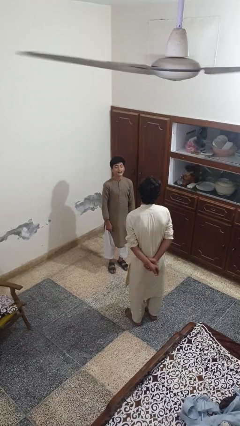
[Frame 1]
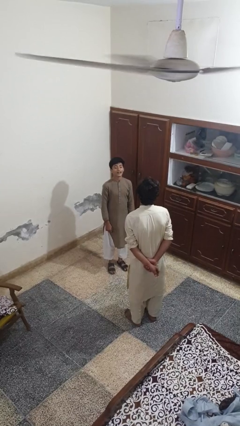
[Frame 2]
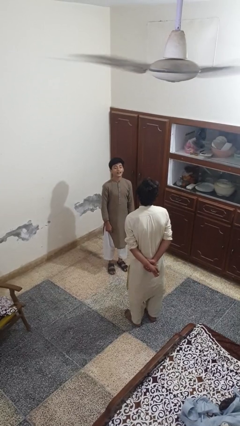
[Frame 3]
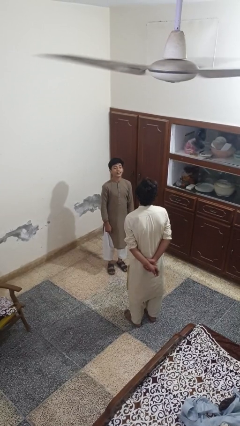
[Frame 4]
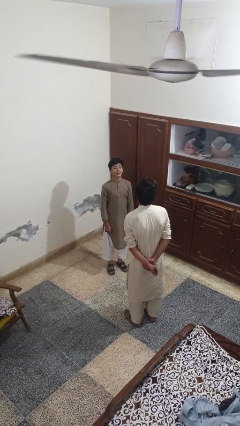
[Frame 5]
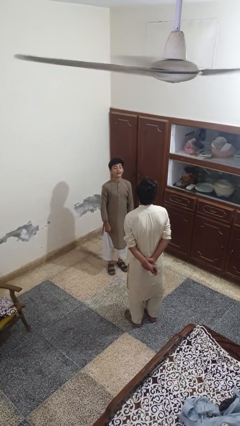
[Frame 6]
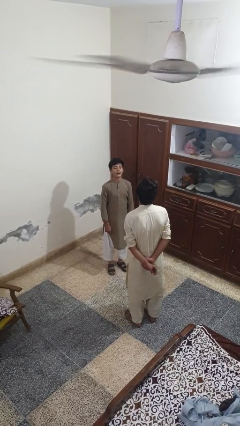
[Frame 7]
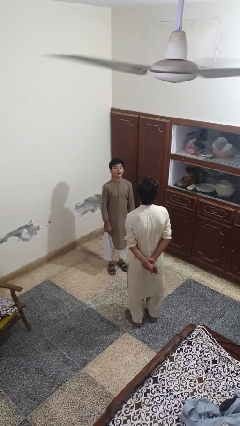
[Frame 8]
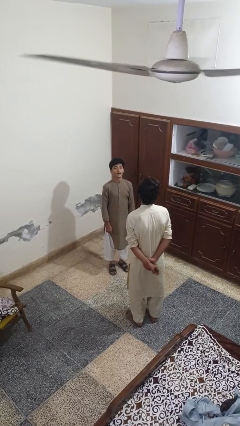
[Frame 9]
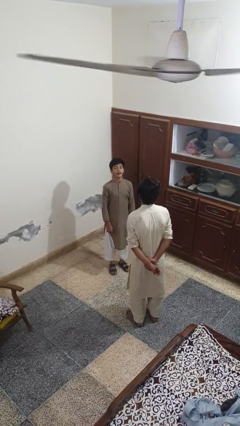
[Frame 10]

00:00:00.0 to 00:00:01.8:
person laughs with person

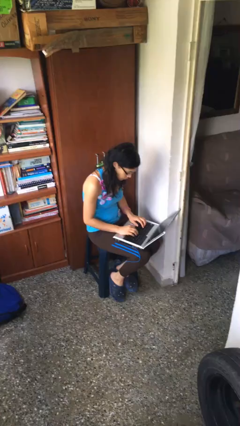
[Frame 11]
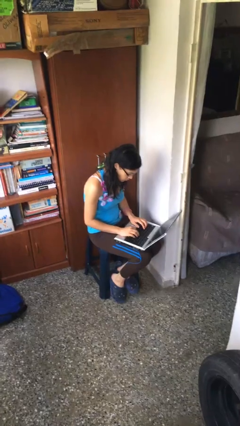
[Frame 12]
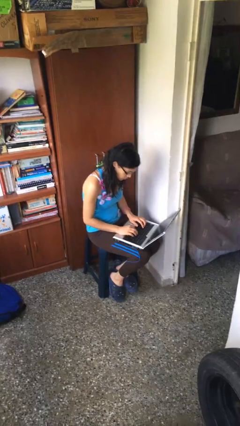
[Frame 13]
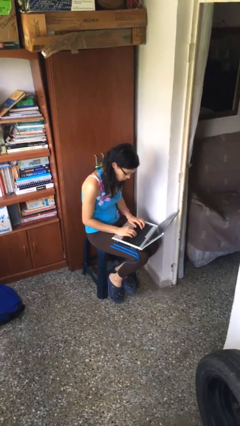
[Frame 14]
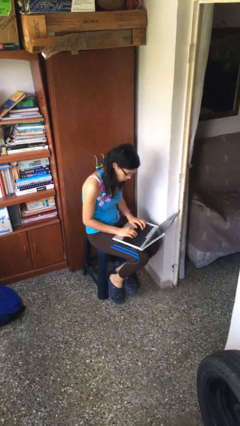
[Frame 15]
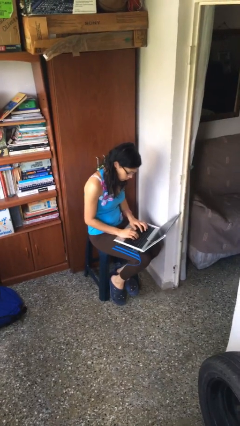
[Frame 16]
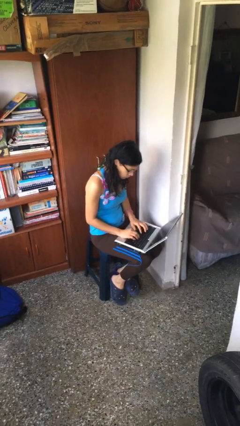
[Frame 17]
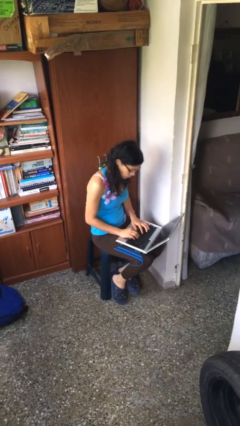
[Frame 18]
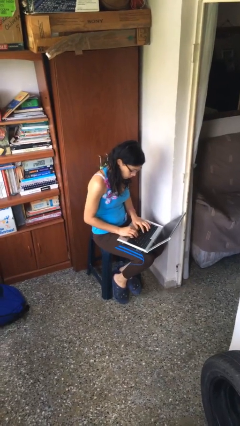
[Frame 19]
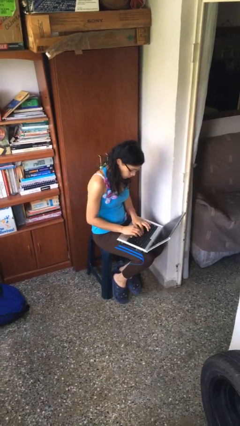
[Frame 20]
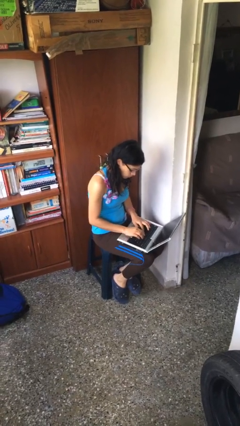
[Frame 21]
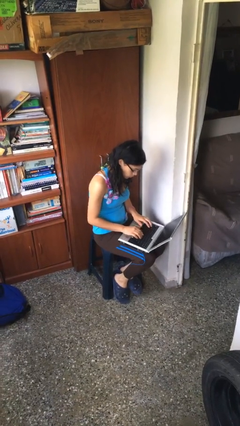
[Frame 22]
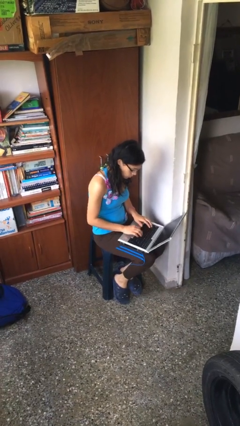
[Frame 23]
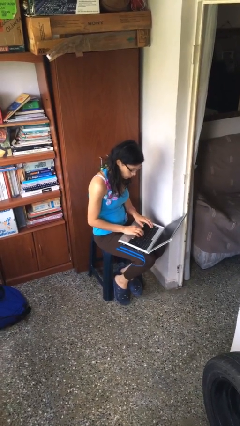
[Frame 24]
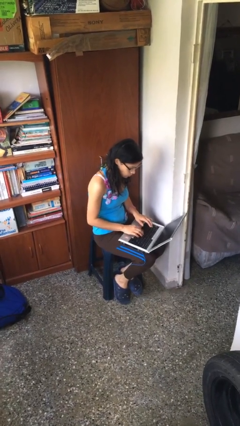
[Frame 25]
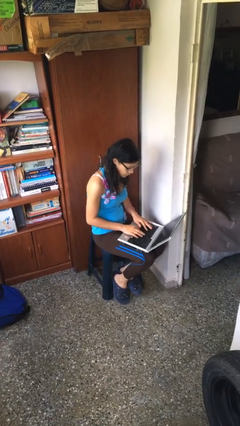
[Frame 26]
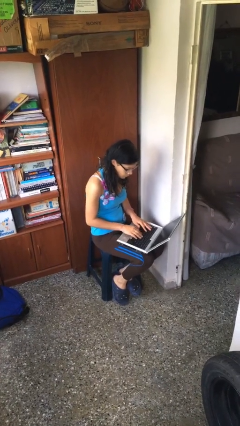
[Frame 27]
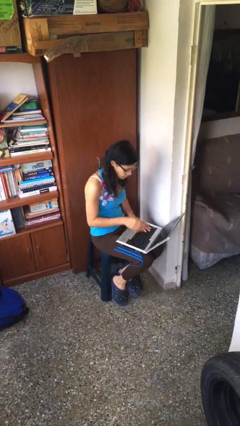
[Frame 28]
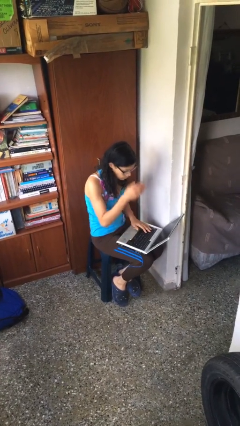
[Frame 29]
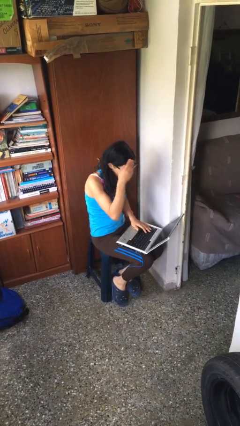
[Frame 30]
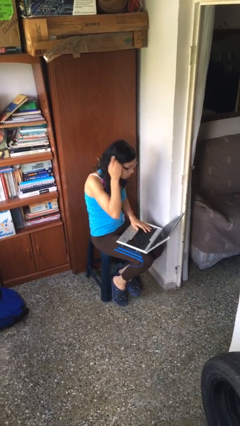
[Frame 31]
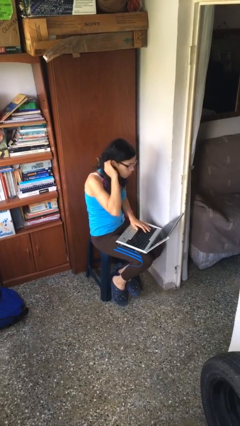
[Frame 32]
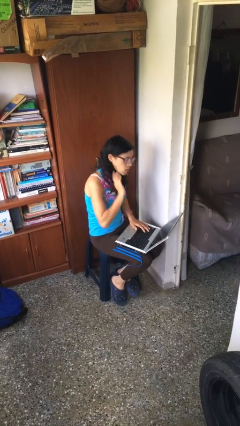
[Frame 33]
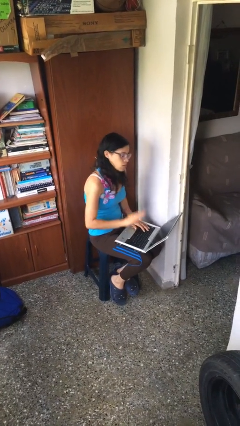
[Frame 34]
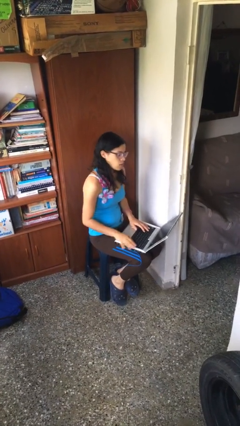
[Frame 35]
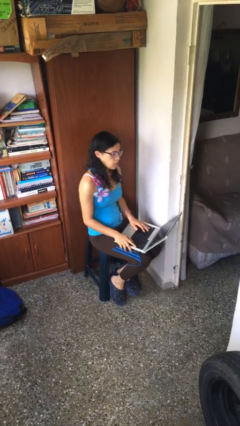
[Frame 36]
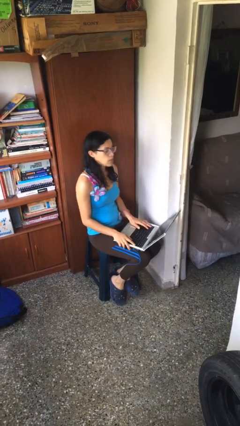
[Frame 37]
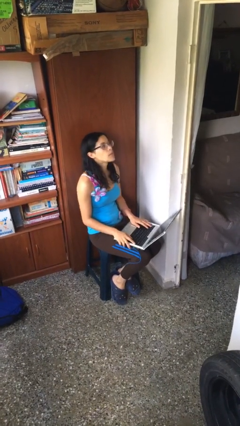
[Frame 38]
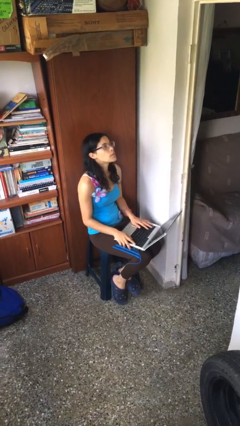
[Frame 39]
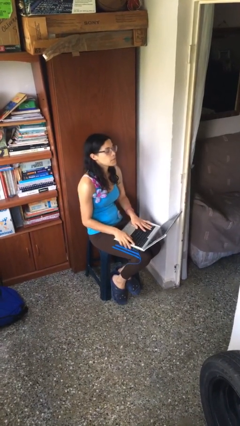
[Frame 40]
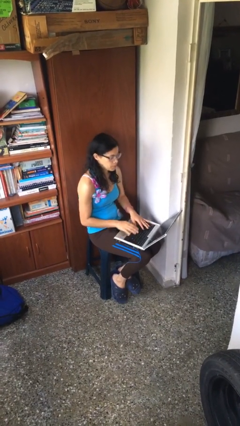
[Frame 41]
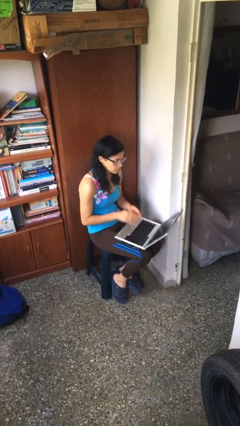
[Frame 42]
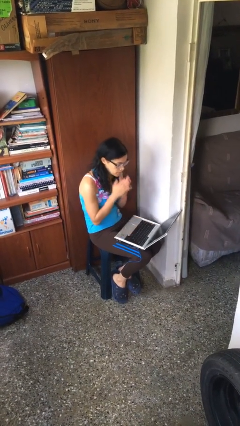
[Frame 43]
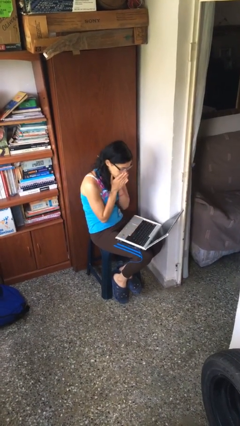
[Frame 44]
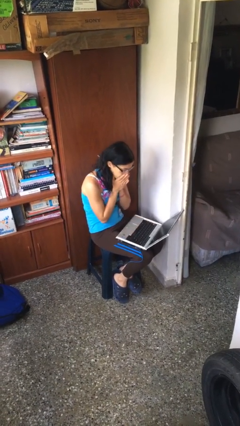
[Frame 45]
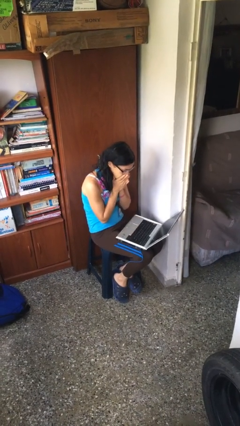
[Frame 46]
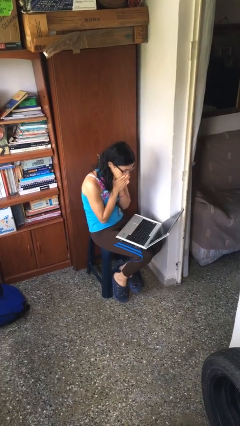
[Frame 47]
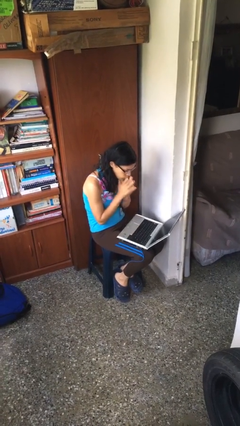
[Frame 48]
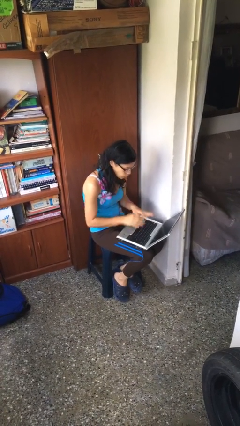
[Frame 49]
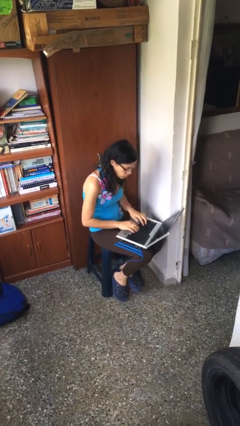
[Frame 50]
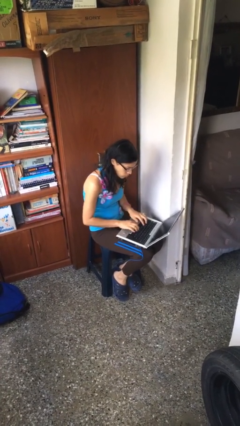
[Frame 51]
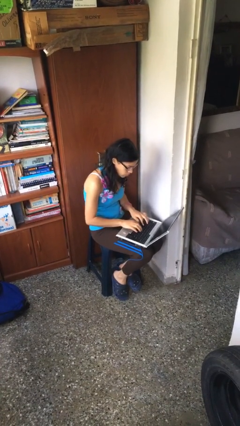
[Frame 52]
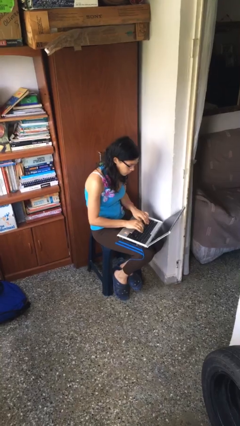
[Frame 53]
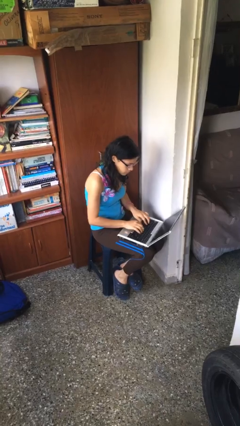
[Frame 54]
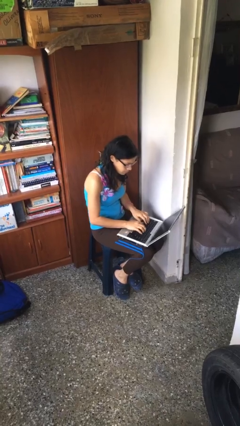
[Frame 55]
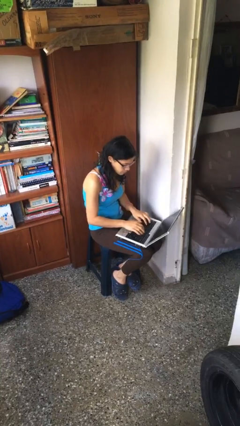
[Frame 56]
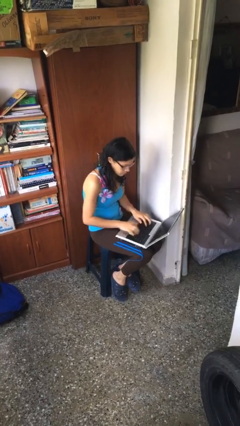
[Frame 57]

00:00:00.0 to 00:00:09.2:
person interacts with laptop

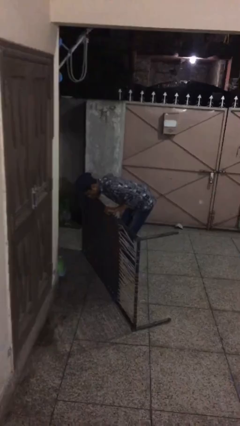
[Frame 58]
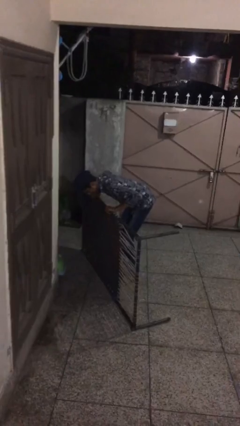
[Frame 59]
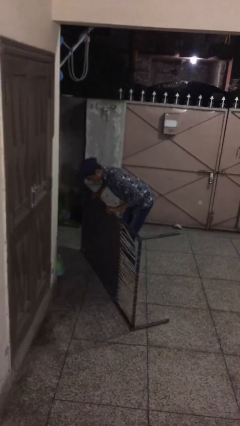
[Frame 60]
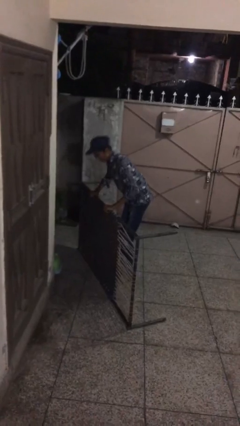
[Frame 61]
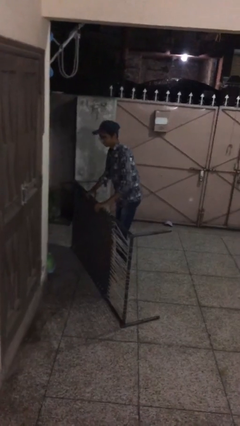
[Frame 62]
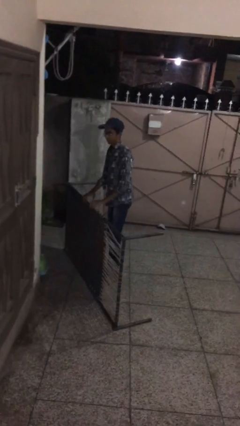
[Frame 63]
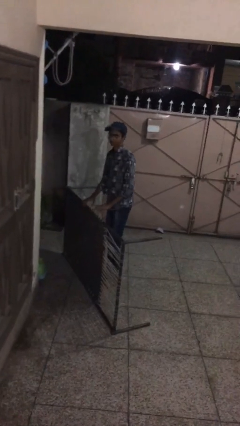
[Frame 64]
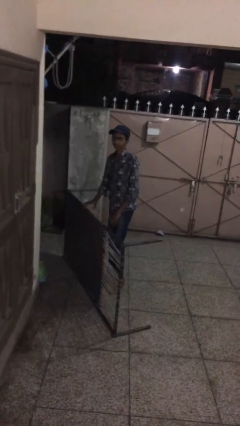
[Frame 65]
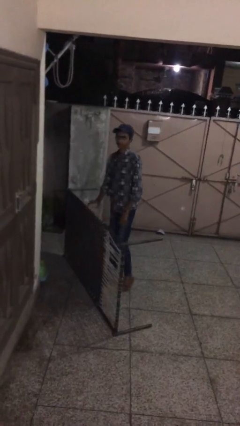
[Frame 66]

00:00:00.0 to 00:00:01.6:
person puts down object on floor

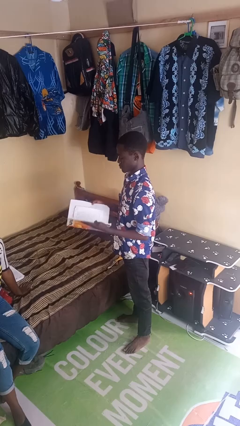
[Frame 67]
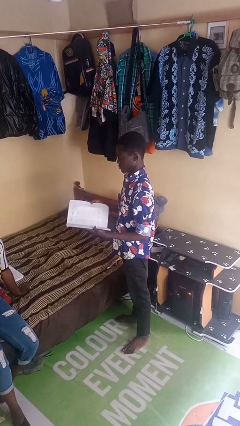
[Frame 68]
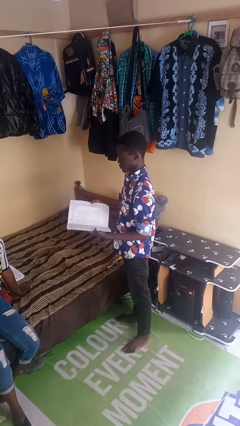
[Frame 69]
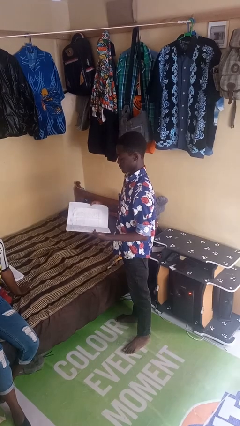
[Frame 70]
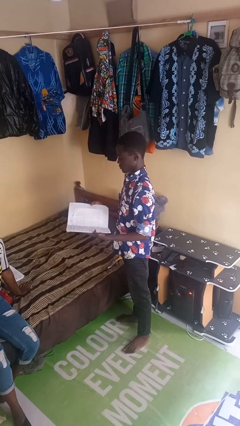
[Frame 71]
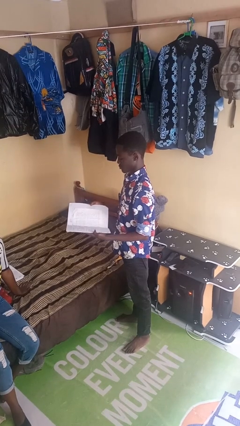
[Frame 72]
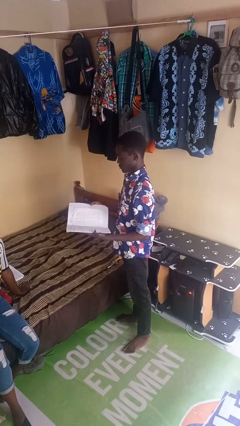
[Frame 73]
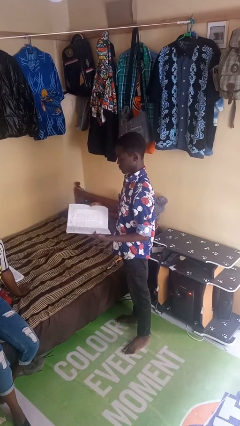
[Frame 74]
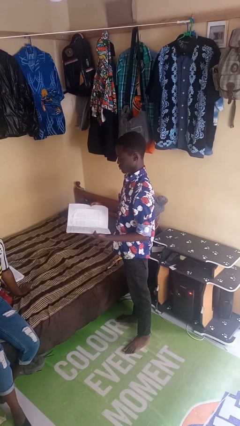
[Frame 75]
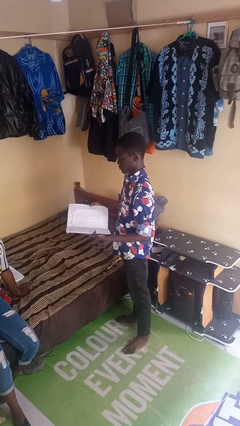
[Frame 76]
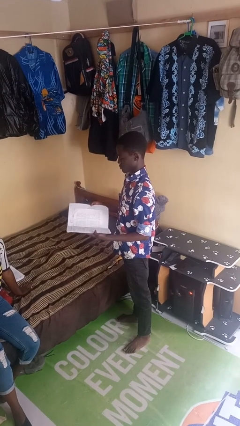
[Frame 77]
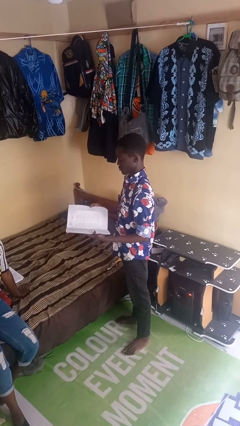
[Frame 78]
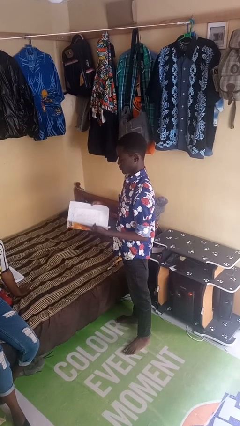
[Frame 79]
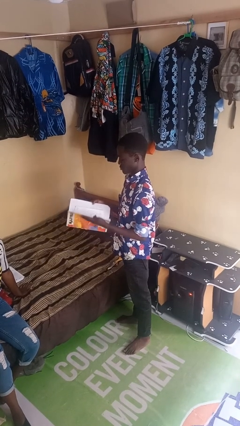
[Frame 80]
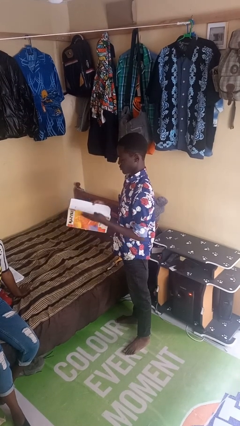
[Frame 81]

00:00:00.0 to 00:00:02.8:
person reads book

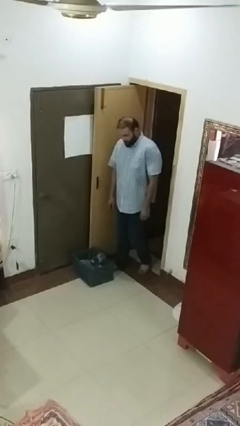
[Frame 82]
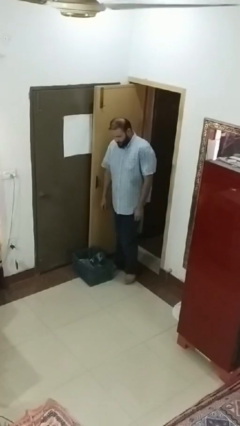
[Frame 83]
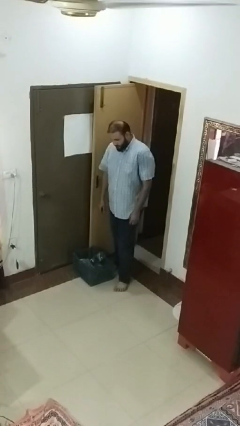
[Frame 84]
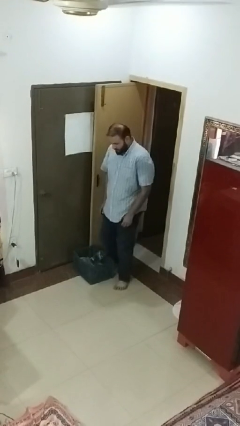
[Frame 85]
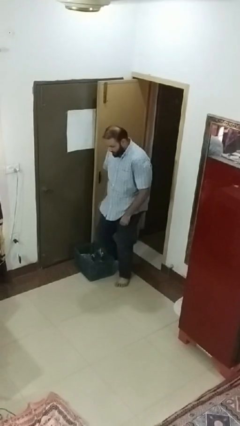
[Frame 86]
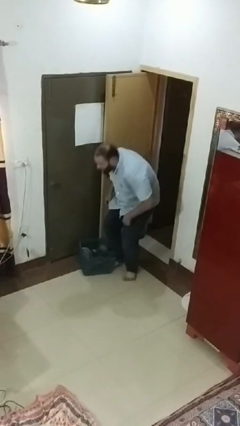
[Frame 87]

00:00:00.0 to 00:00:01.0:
person trips on object on floor

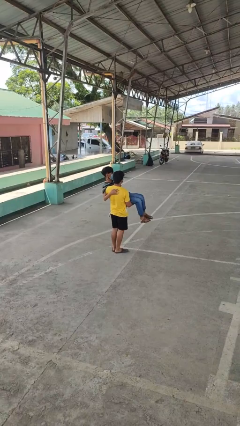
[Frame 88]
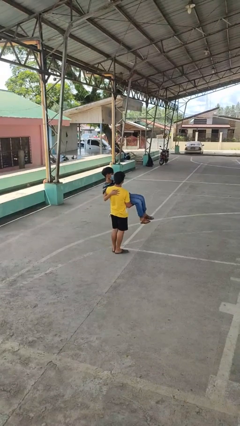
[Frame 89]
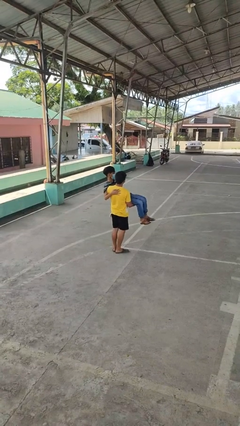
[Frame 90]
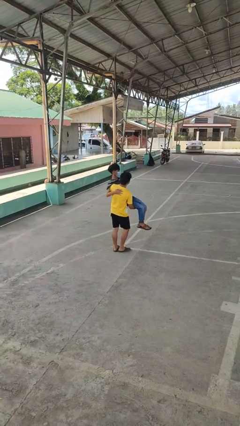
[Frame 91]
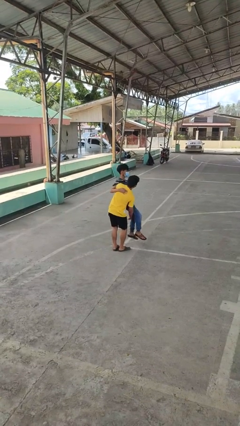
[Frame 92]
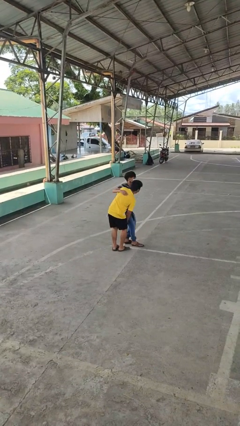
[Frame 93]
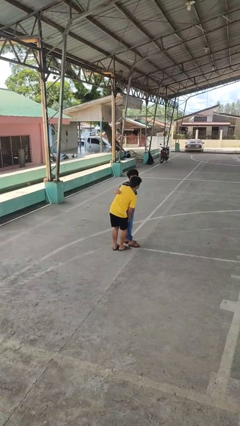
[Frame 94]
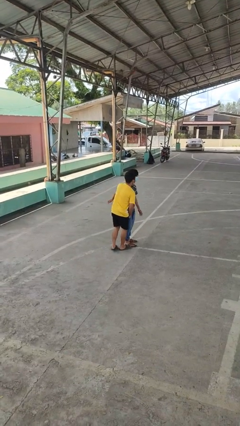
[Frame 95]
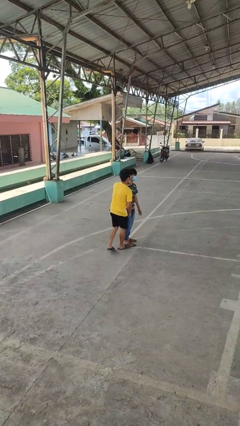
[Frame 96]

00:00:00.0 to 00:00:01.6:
person puts down person
